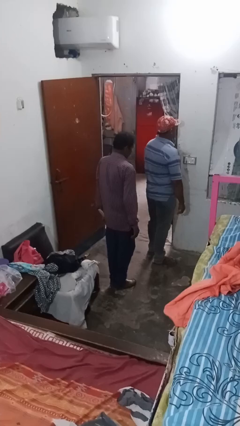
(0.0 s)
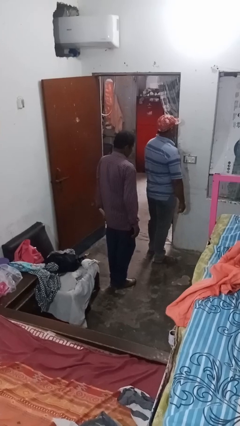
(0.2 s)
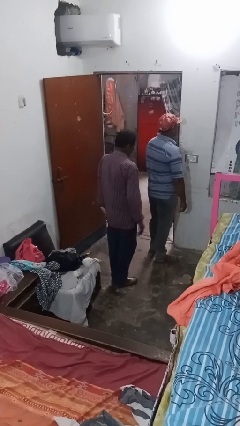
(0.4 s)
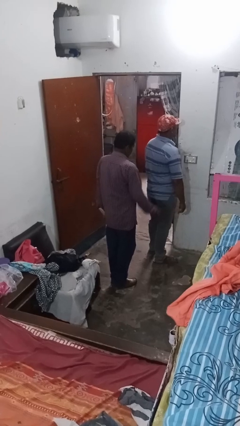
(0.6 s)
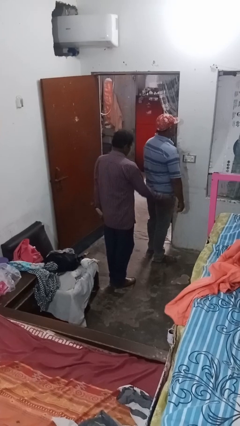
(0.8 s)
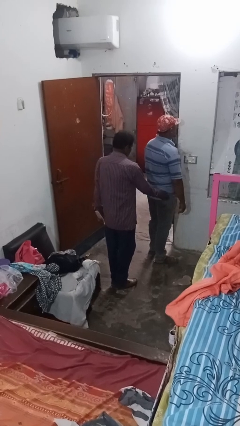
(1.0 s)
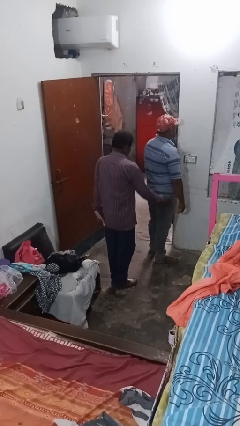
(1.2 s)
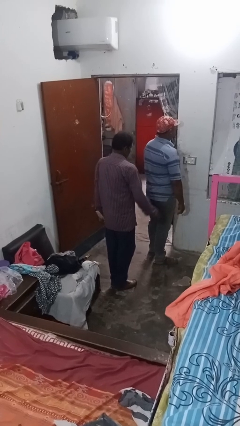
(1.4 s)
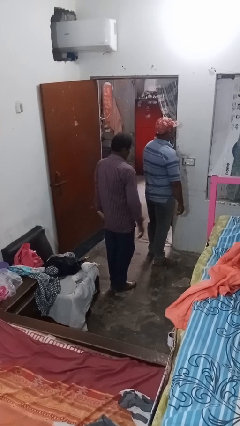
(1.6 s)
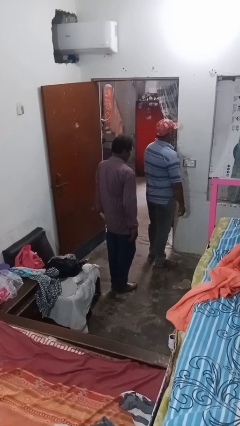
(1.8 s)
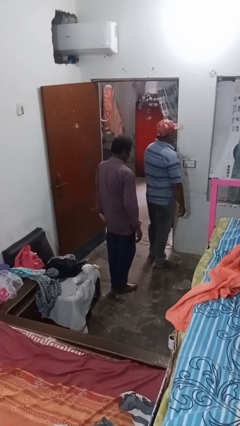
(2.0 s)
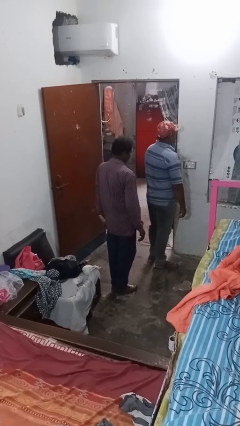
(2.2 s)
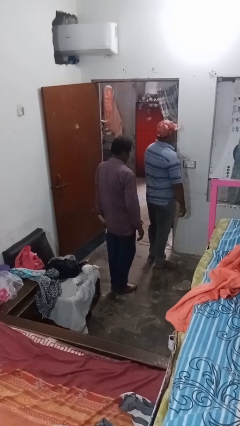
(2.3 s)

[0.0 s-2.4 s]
person bumps into person

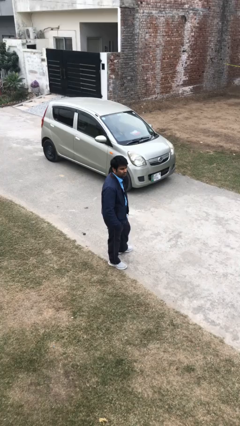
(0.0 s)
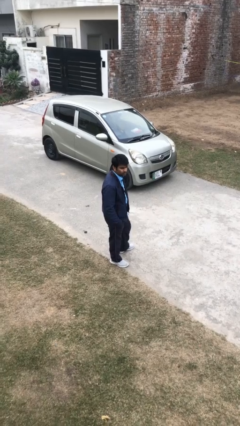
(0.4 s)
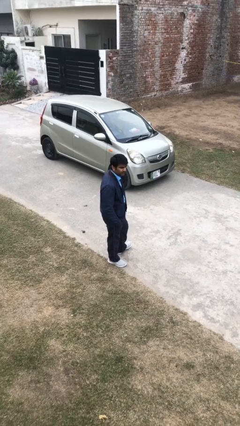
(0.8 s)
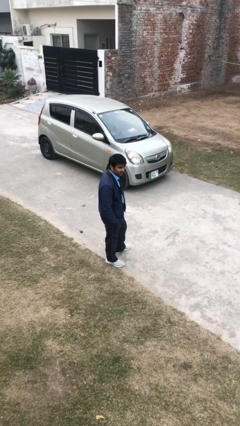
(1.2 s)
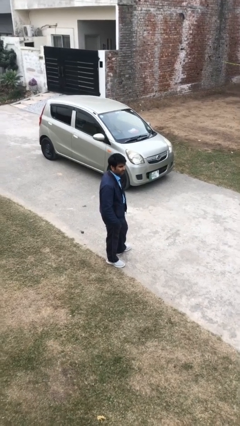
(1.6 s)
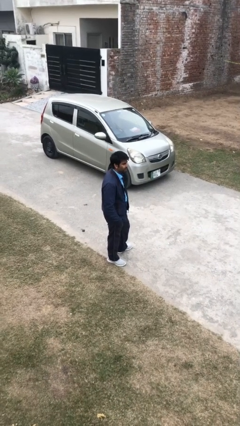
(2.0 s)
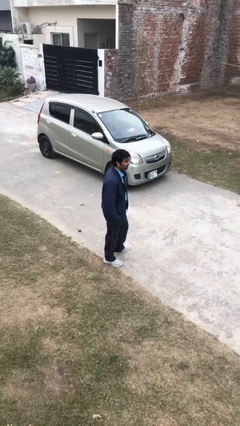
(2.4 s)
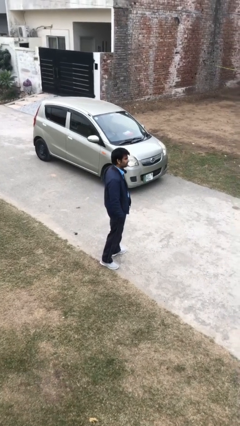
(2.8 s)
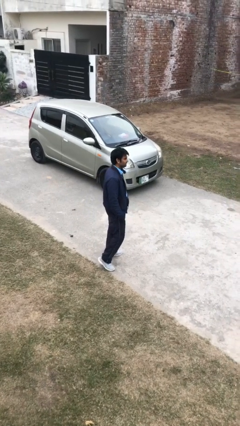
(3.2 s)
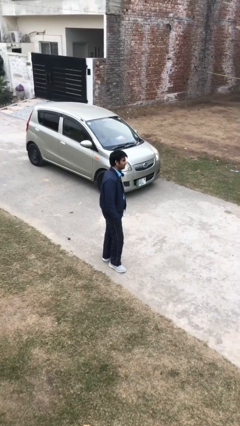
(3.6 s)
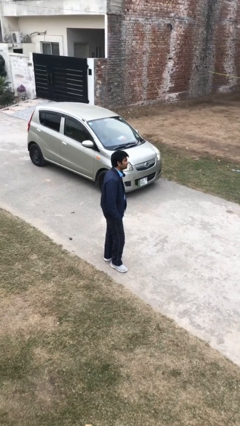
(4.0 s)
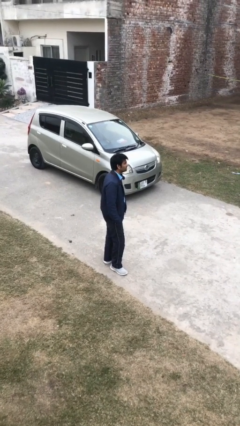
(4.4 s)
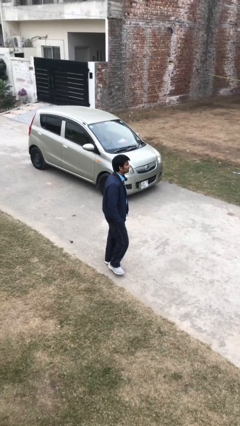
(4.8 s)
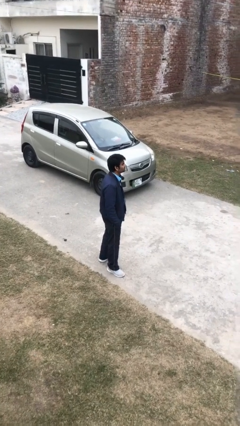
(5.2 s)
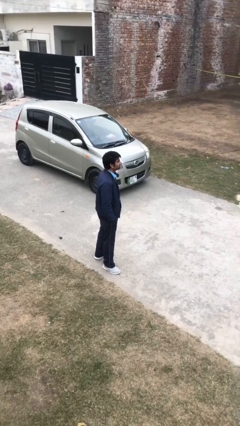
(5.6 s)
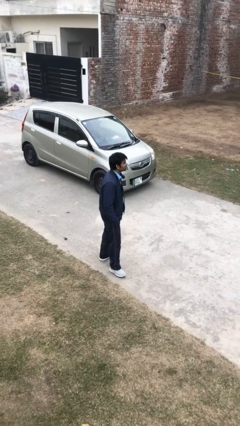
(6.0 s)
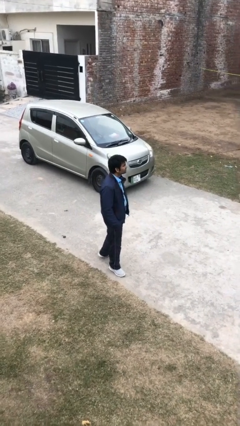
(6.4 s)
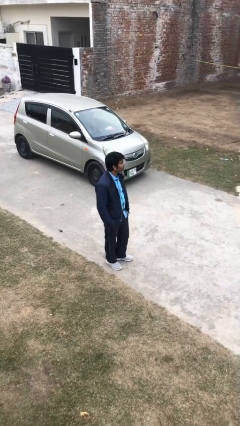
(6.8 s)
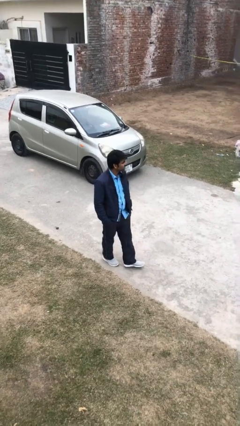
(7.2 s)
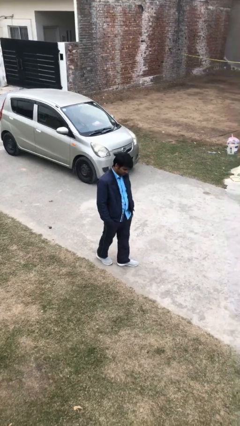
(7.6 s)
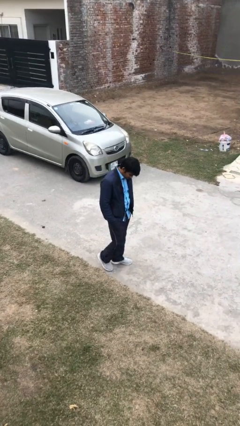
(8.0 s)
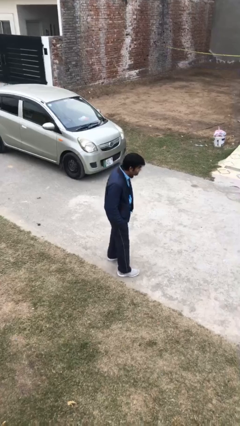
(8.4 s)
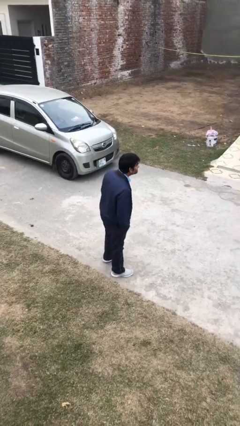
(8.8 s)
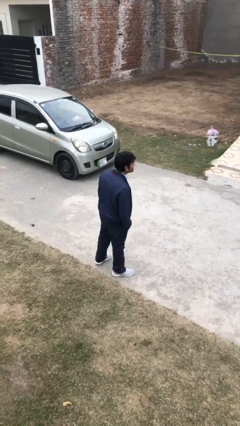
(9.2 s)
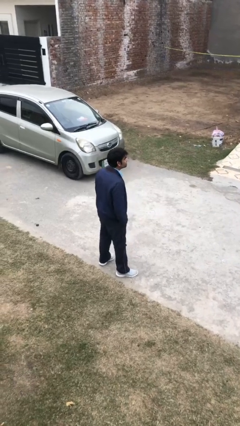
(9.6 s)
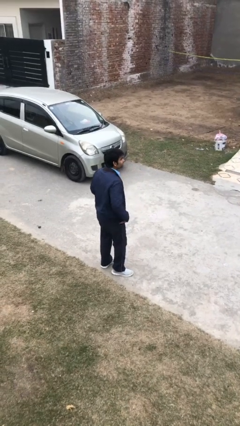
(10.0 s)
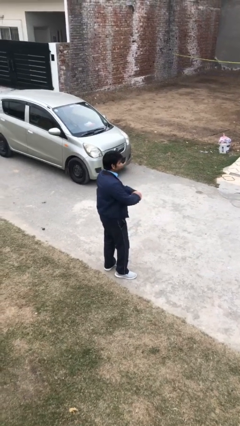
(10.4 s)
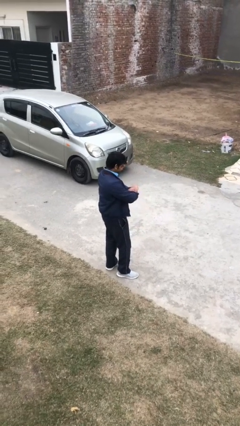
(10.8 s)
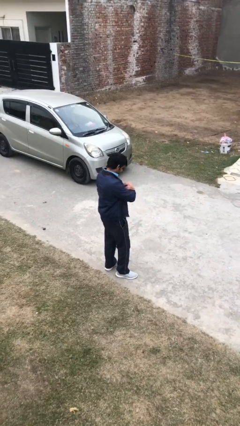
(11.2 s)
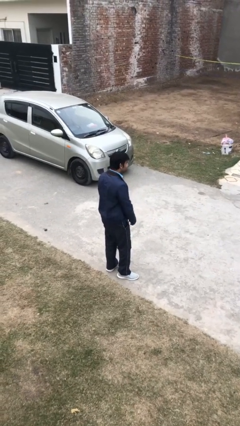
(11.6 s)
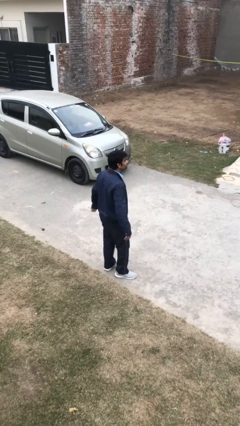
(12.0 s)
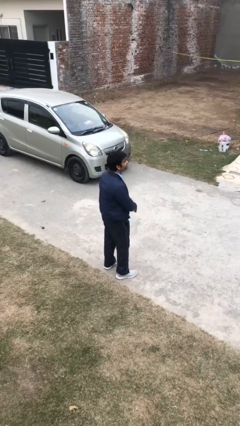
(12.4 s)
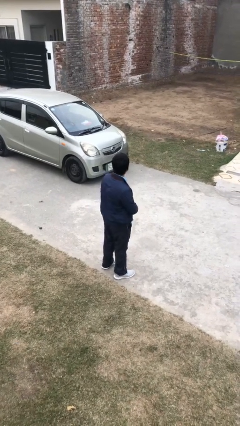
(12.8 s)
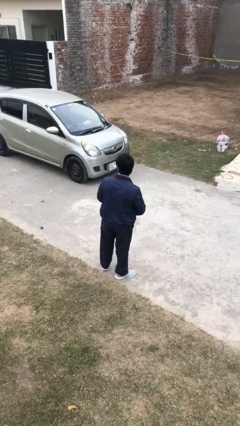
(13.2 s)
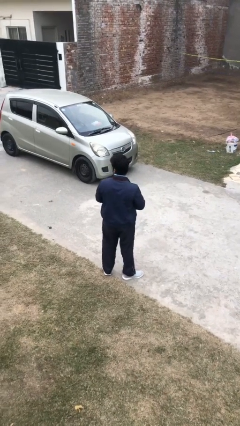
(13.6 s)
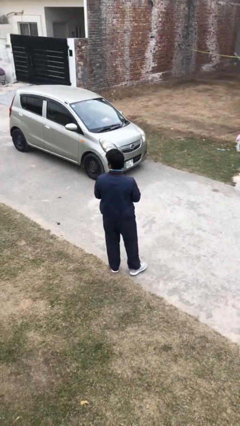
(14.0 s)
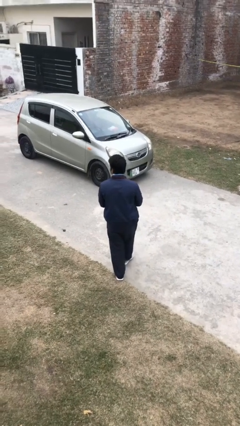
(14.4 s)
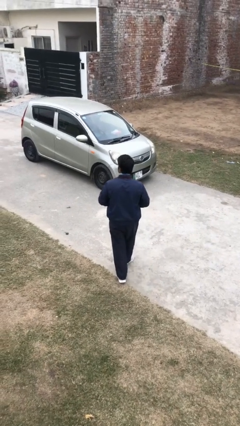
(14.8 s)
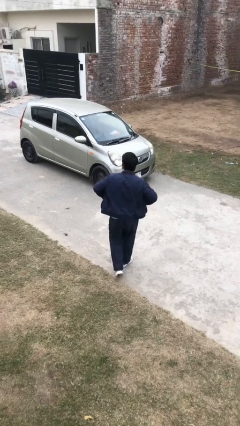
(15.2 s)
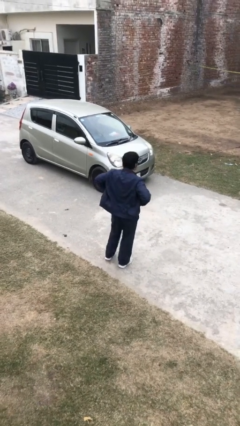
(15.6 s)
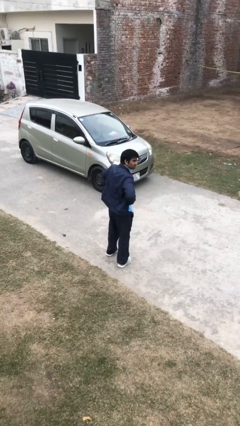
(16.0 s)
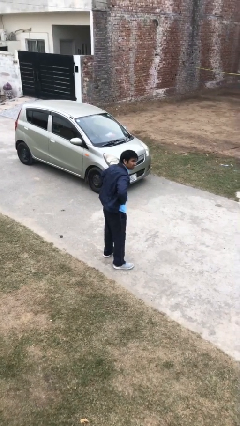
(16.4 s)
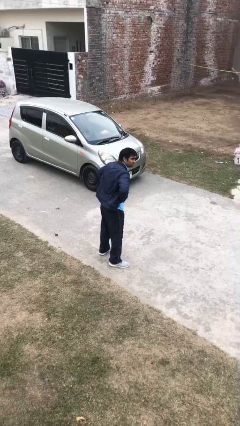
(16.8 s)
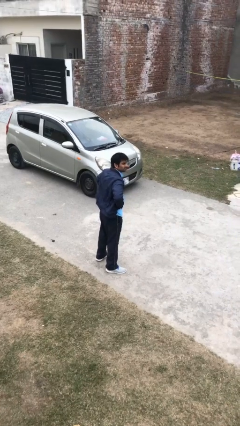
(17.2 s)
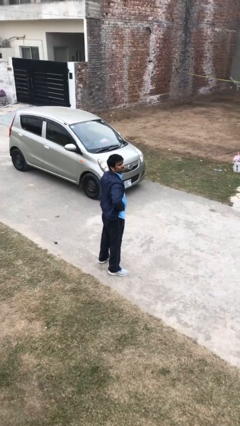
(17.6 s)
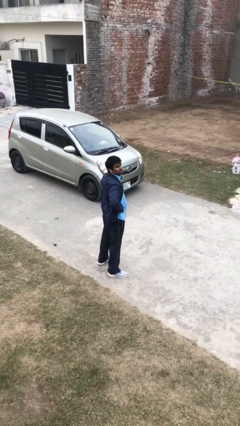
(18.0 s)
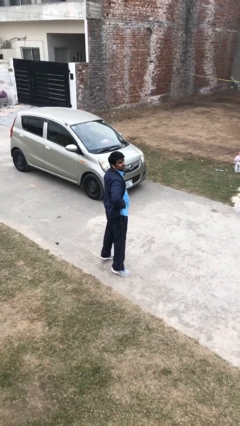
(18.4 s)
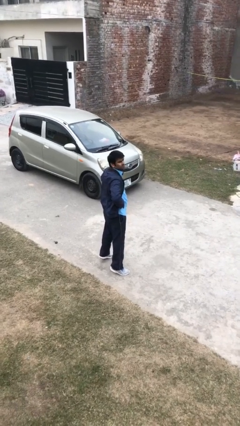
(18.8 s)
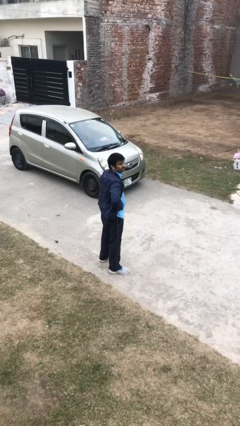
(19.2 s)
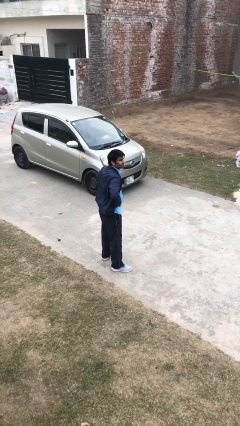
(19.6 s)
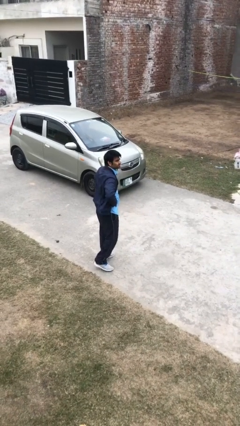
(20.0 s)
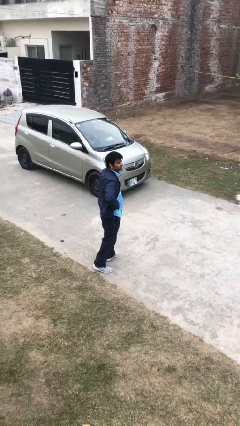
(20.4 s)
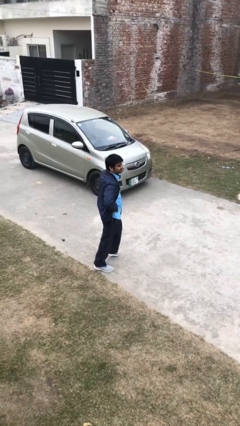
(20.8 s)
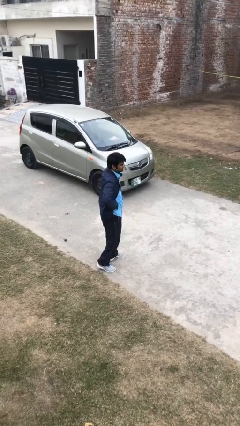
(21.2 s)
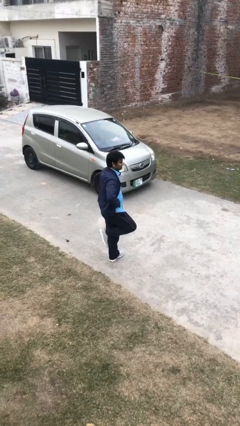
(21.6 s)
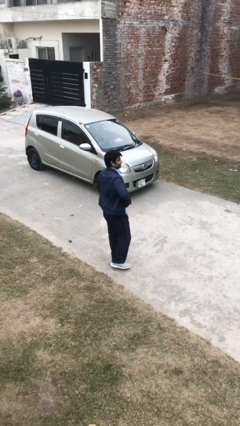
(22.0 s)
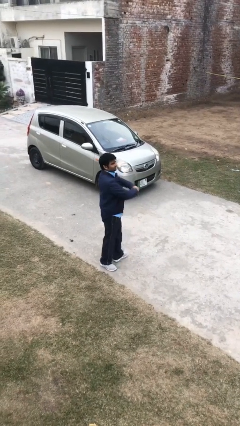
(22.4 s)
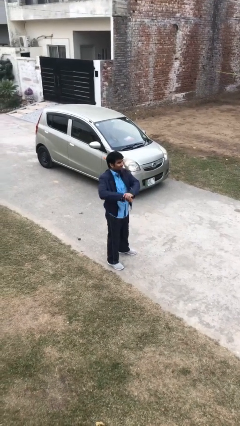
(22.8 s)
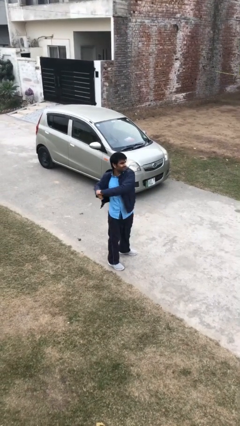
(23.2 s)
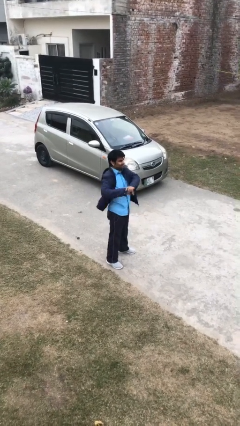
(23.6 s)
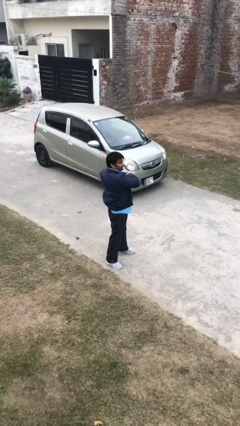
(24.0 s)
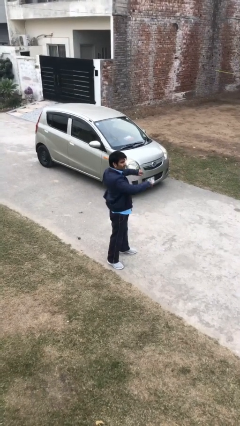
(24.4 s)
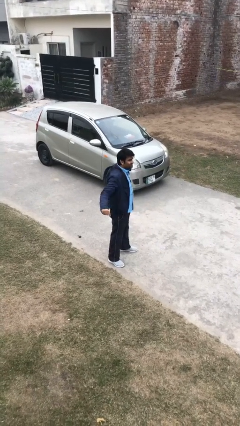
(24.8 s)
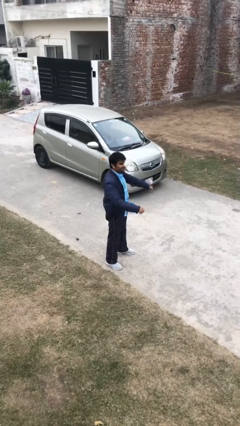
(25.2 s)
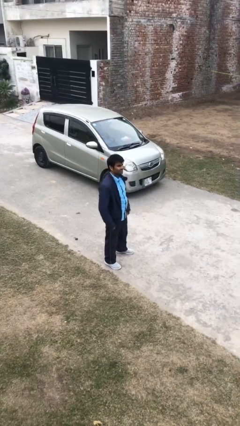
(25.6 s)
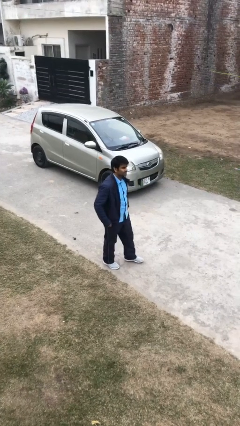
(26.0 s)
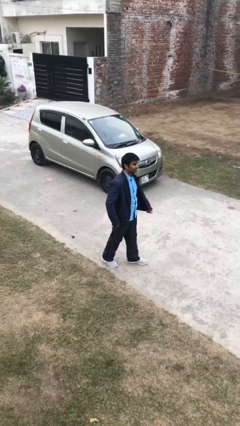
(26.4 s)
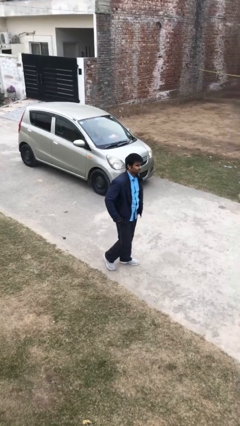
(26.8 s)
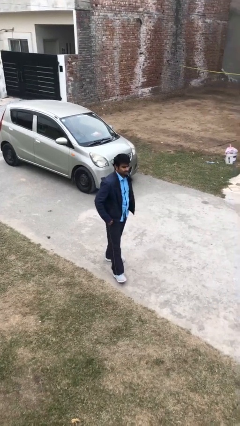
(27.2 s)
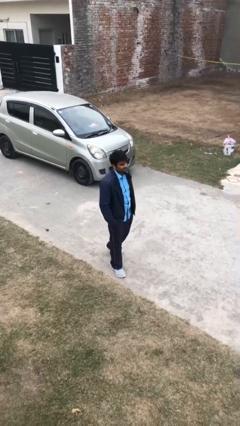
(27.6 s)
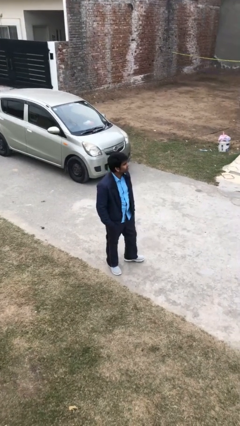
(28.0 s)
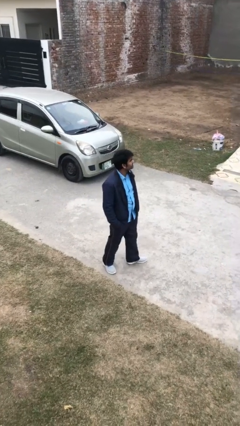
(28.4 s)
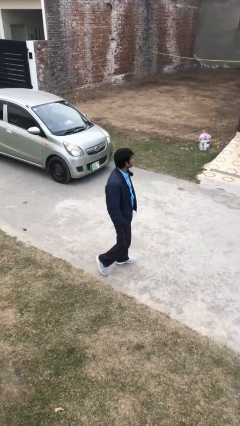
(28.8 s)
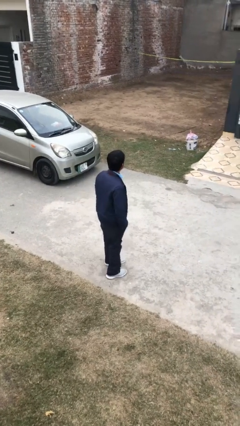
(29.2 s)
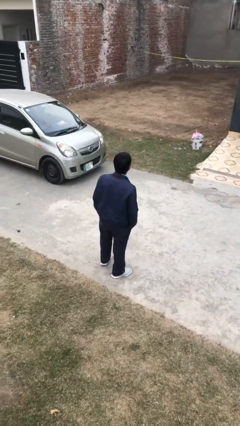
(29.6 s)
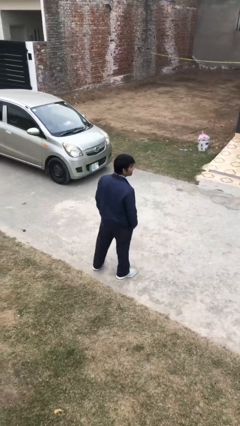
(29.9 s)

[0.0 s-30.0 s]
person walks

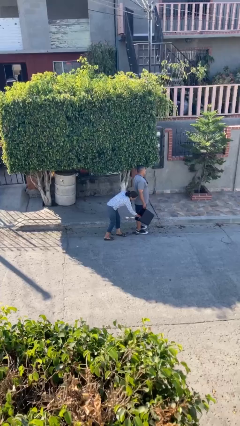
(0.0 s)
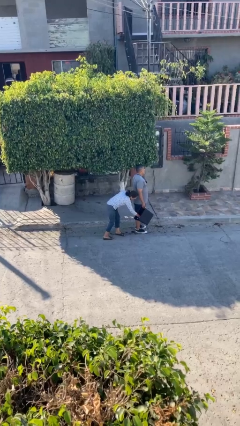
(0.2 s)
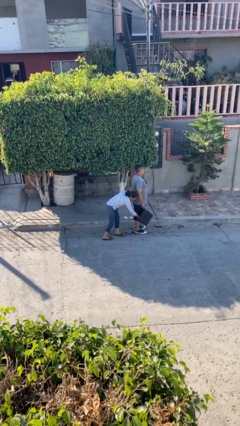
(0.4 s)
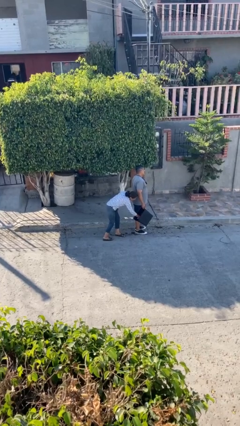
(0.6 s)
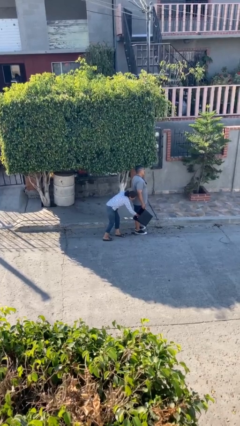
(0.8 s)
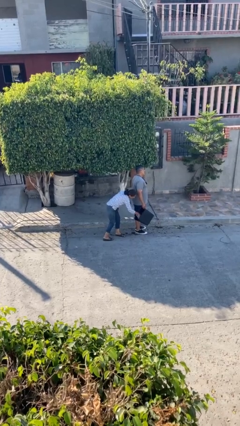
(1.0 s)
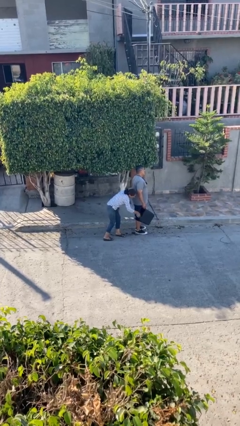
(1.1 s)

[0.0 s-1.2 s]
person steals object from person
